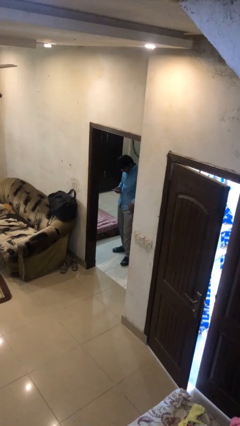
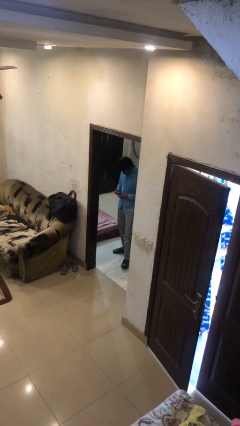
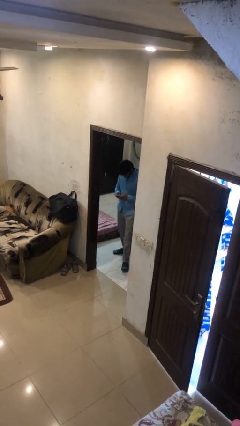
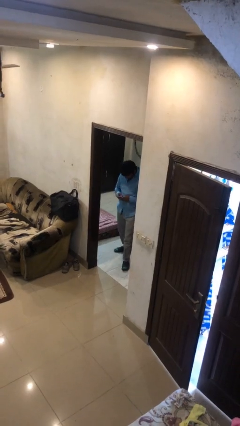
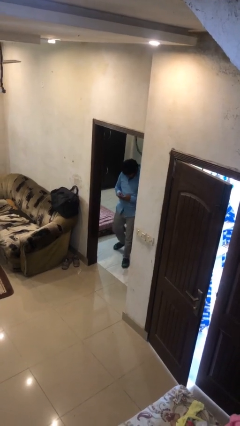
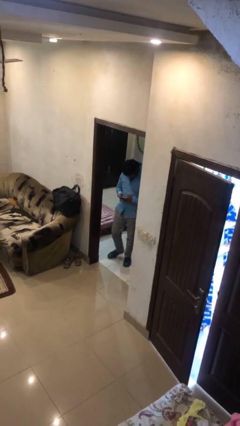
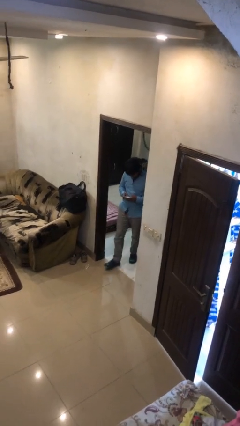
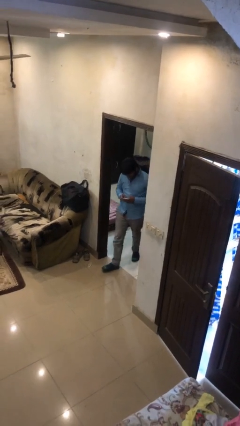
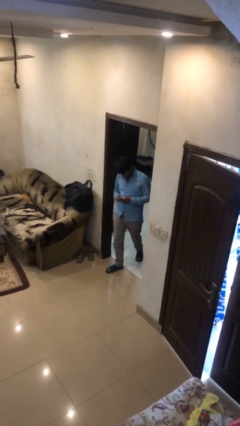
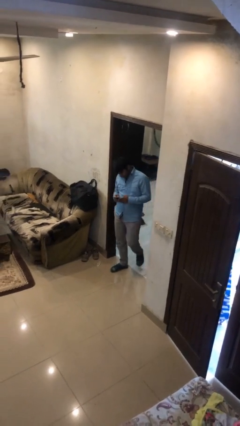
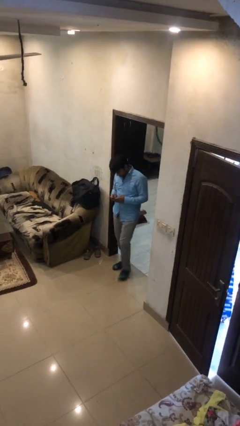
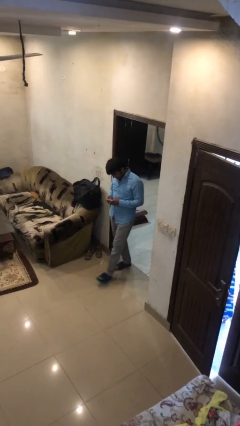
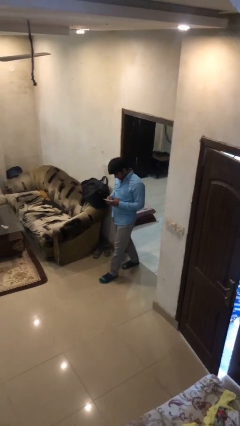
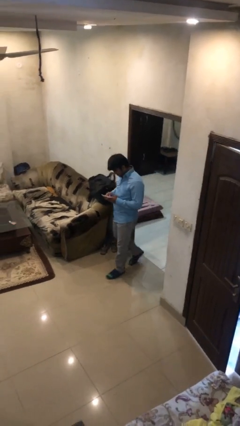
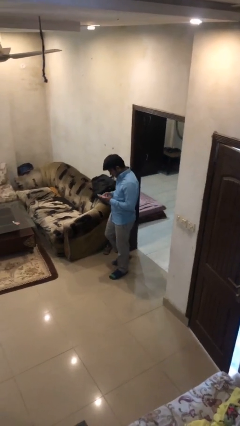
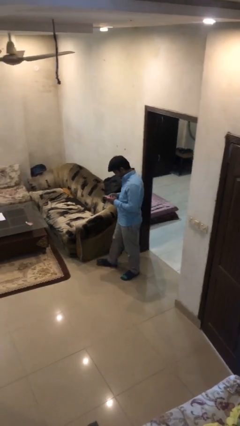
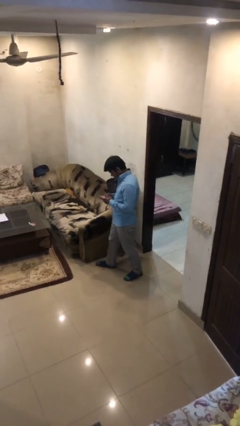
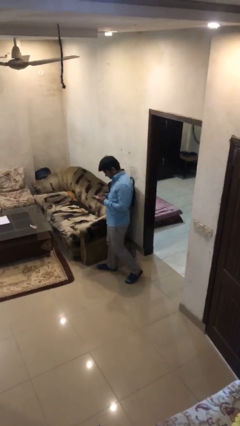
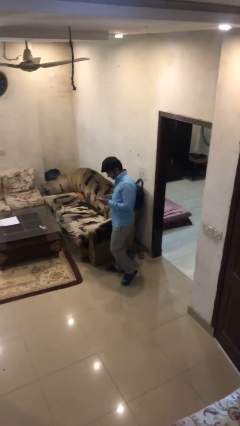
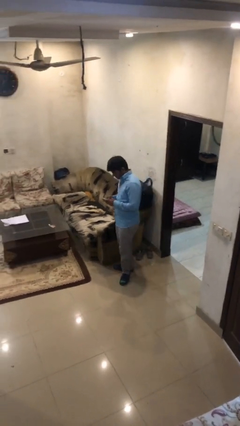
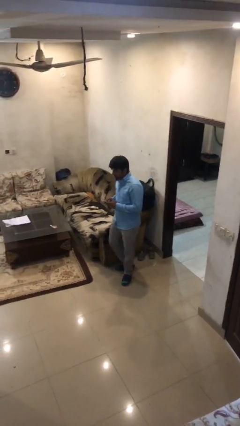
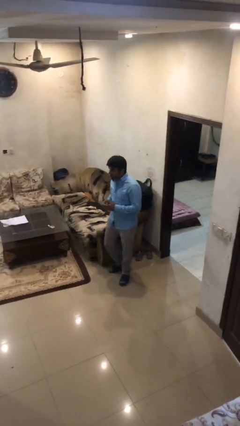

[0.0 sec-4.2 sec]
person enters scene through structure

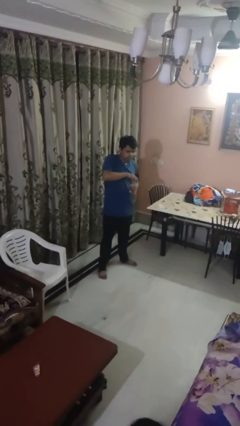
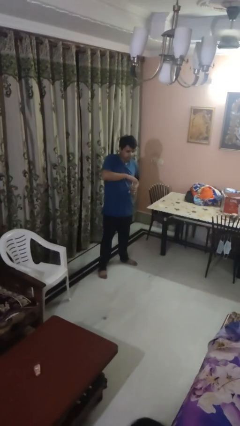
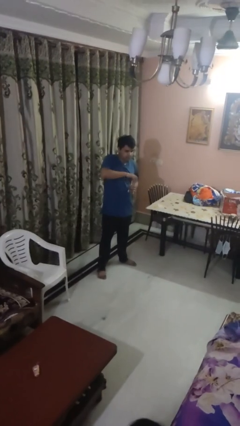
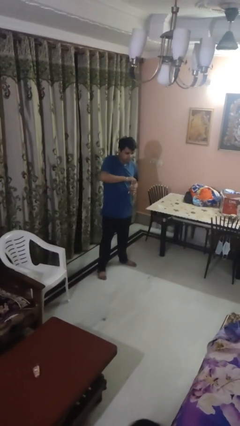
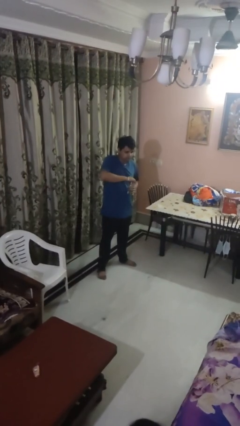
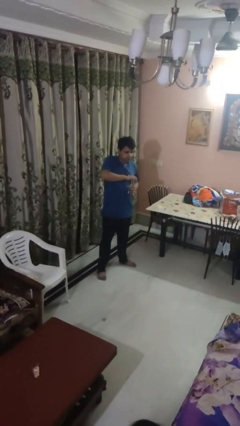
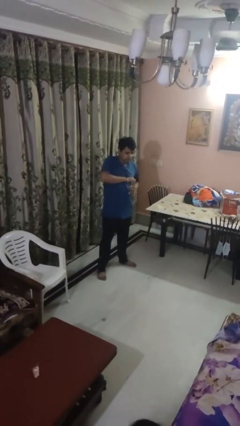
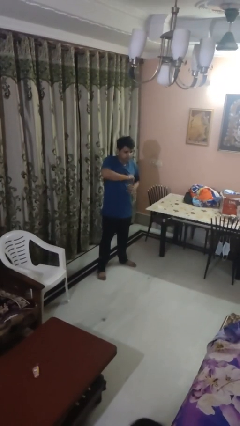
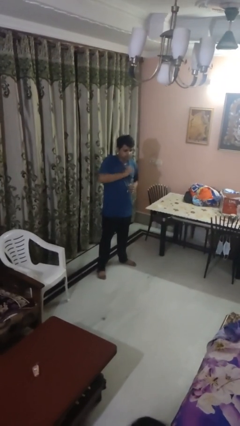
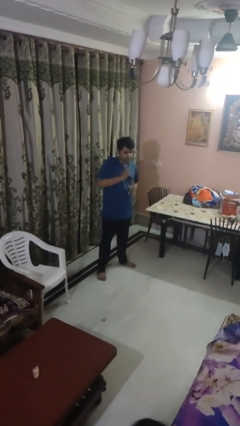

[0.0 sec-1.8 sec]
person unscrews lid from bottle

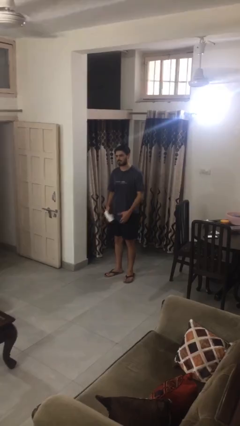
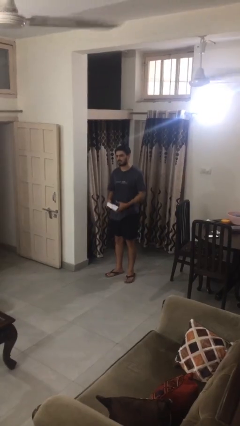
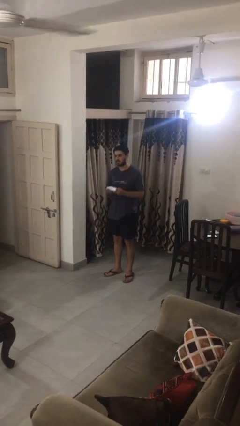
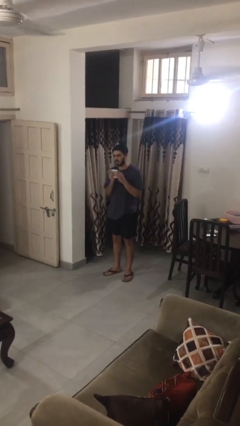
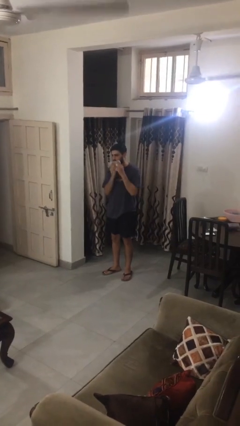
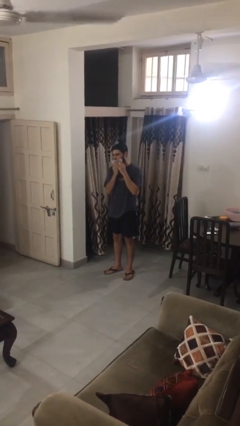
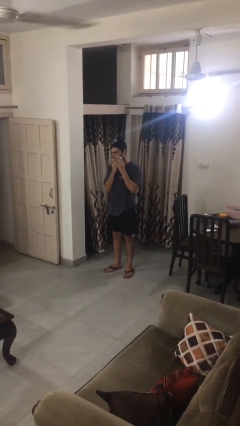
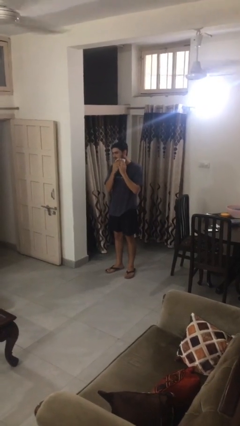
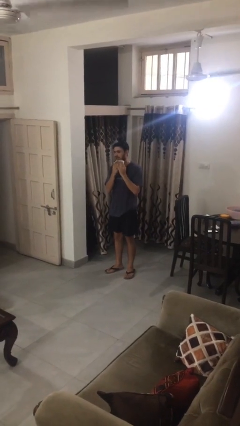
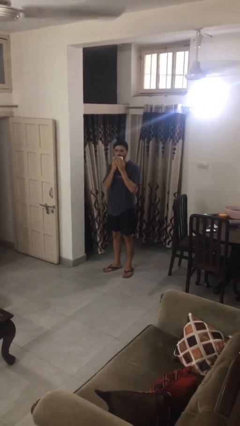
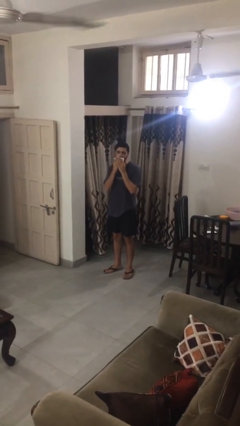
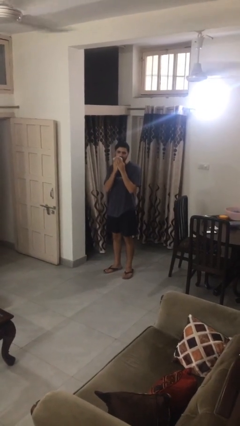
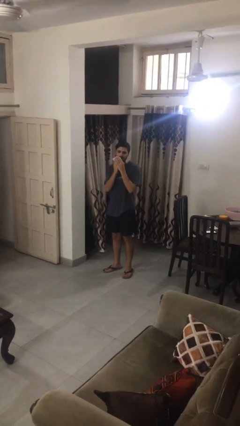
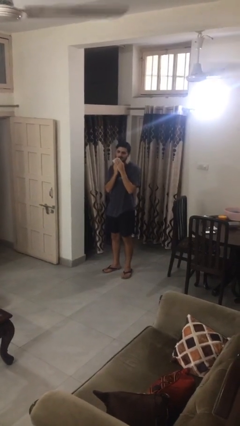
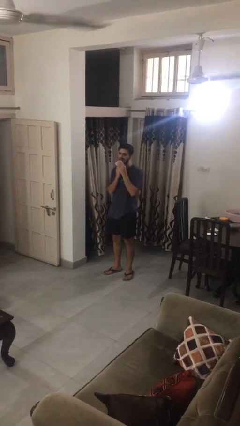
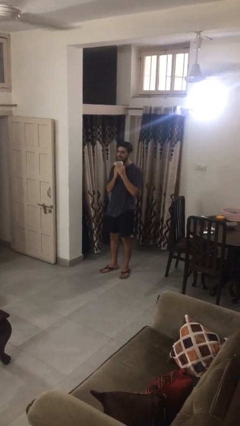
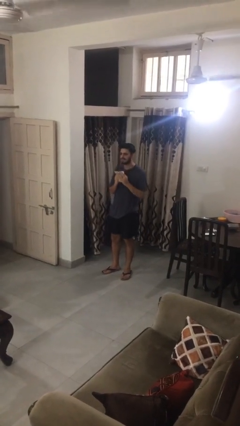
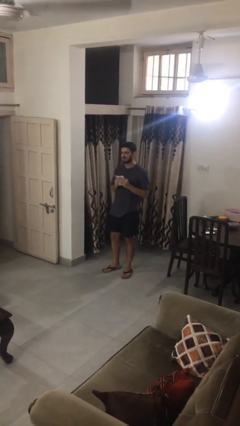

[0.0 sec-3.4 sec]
person wipes mouth with napkin

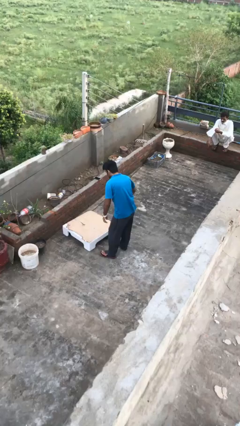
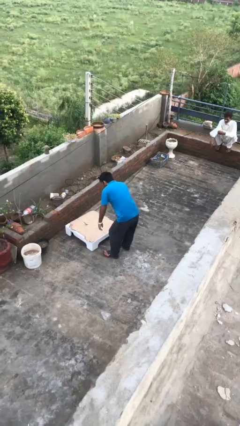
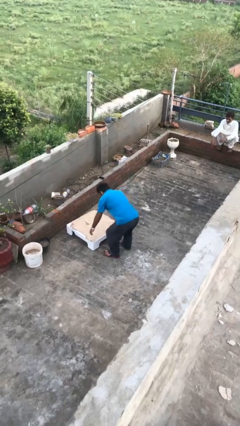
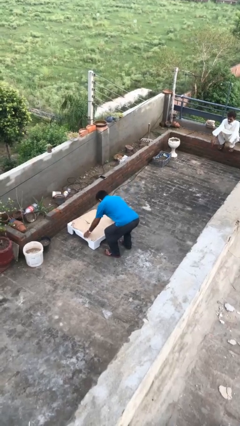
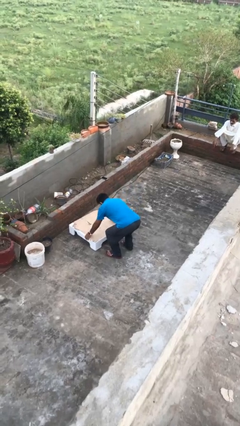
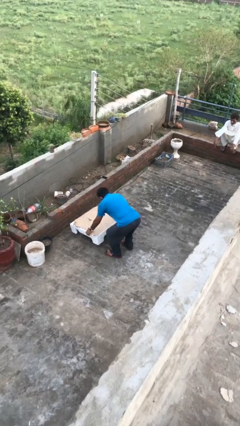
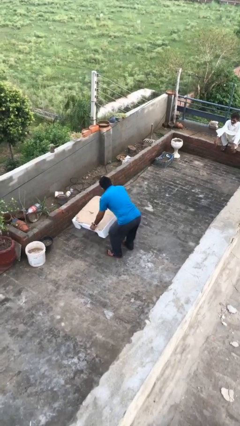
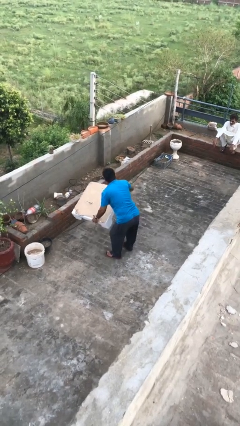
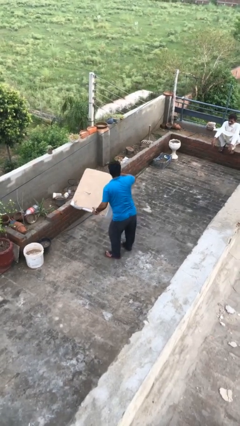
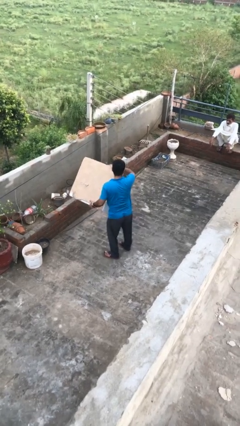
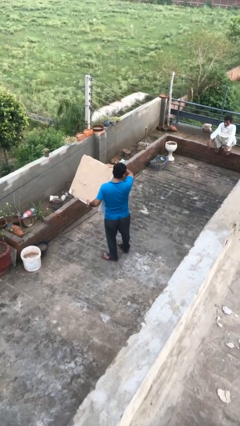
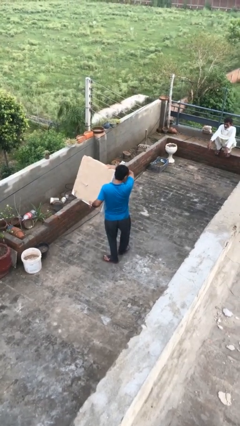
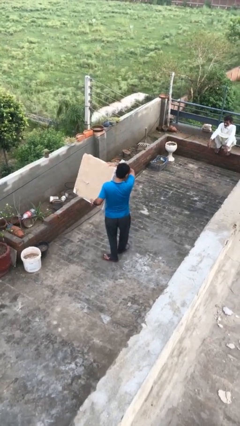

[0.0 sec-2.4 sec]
person picks up object from floor

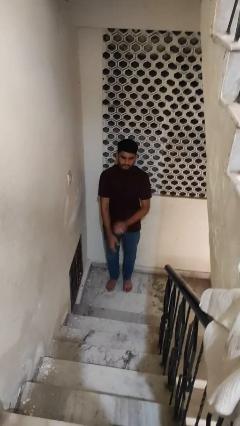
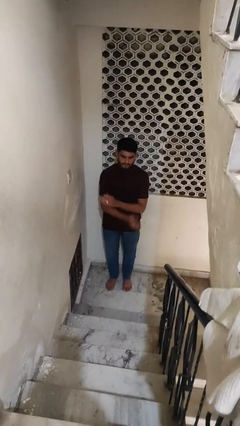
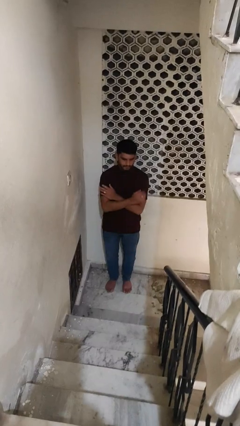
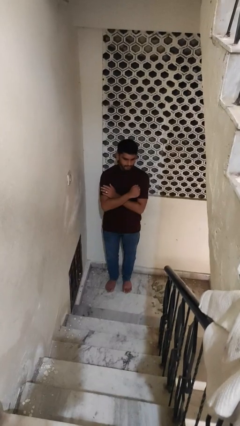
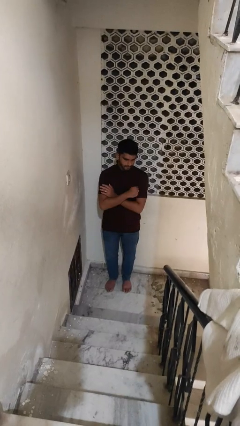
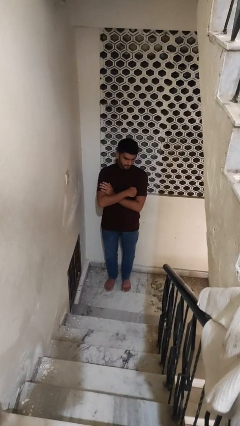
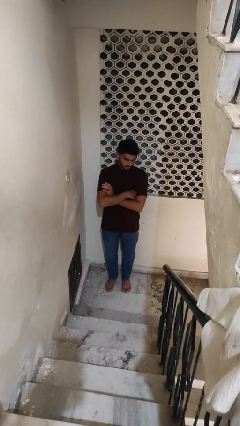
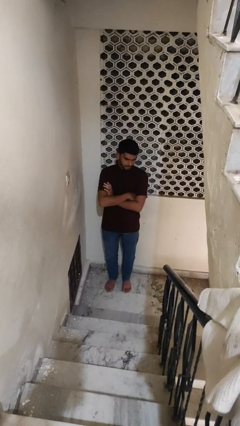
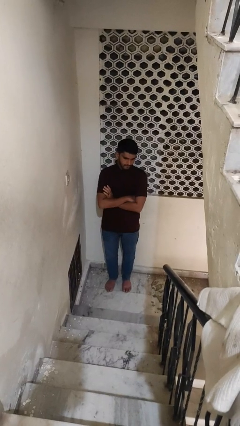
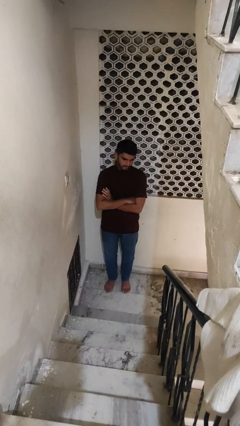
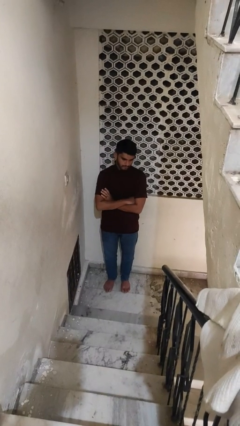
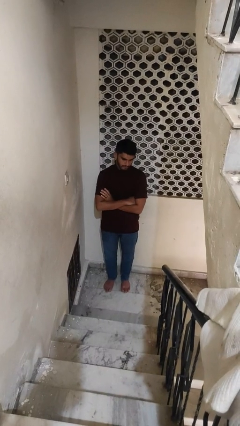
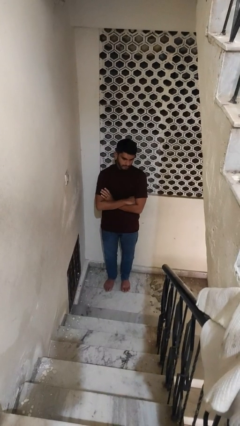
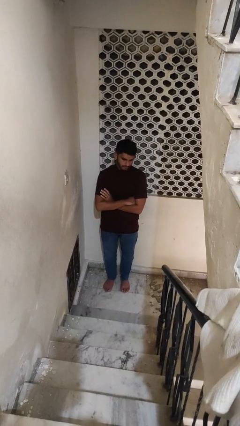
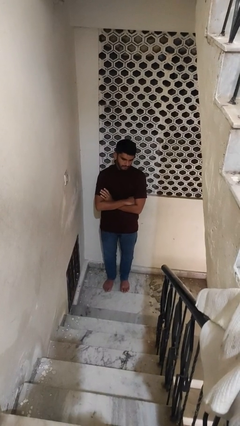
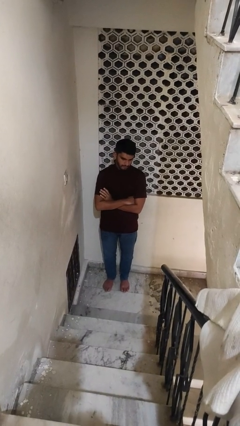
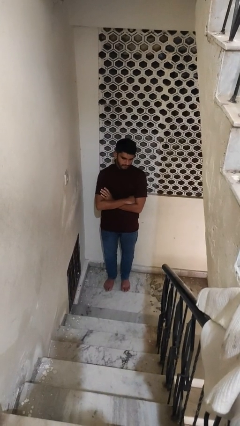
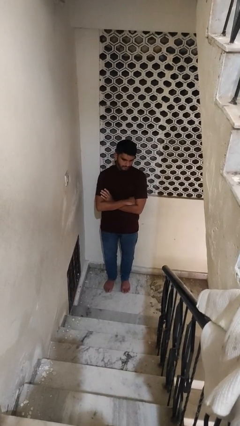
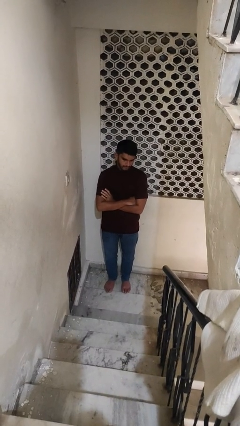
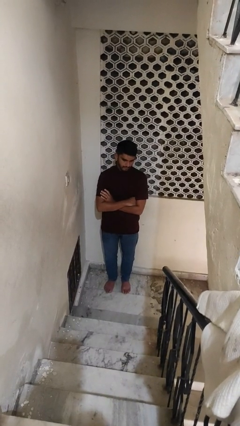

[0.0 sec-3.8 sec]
person crosses arms

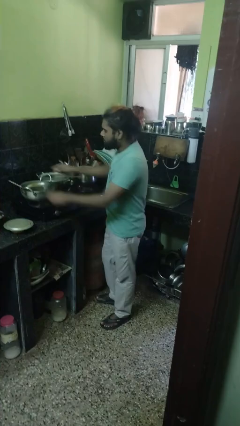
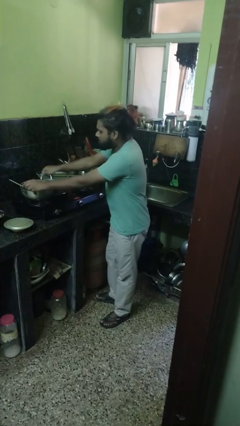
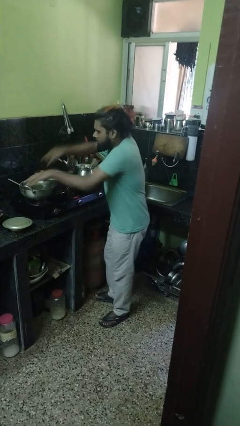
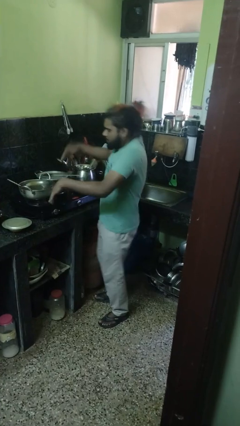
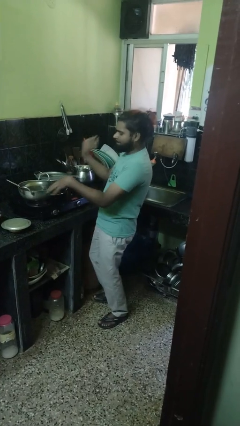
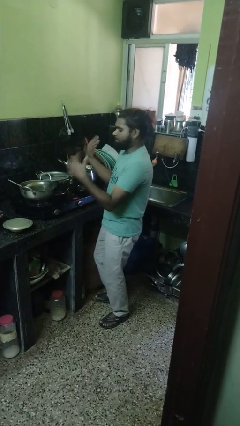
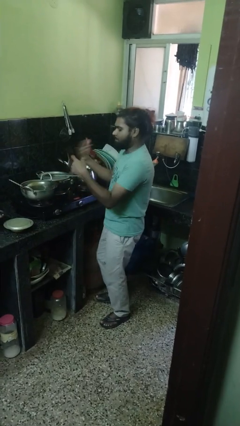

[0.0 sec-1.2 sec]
person burns hand

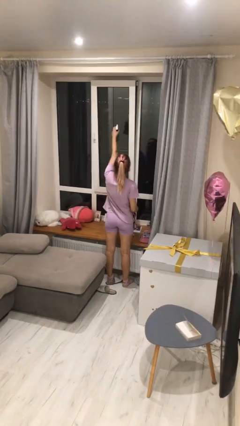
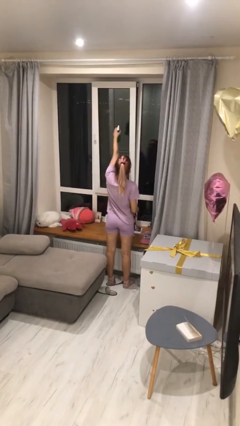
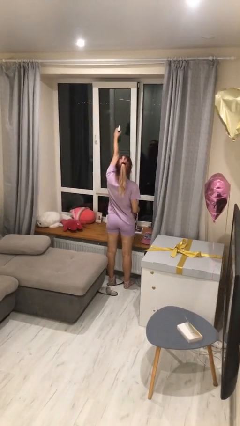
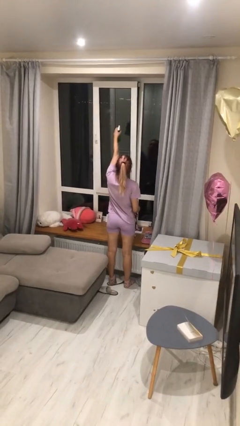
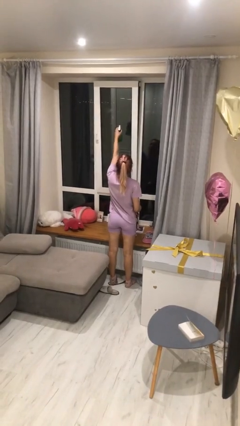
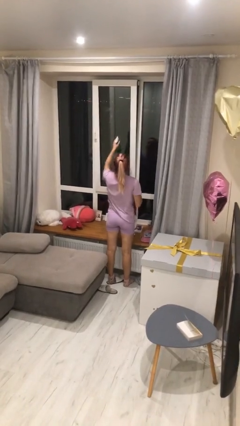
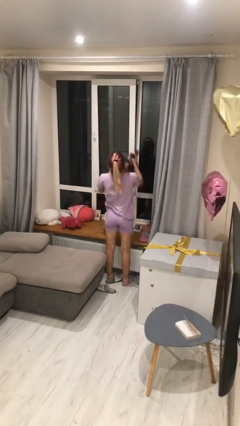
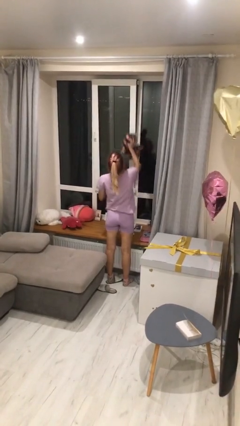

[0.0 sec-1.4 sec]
person sprays from bottle
